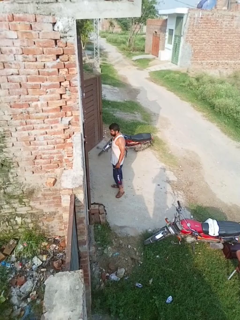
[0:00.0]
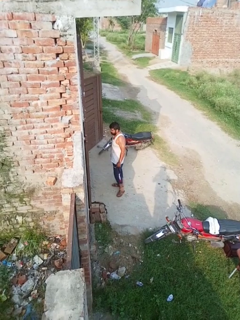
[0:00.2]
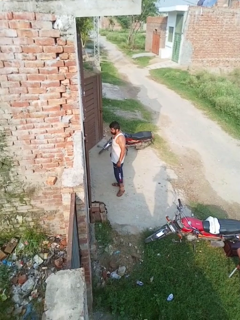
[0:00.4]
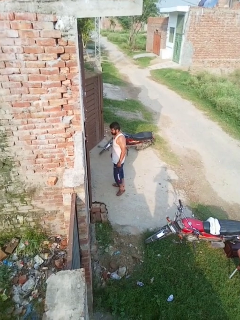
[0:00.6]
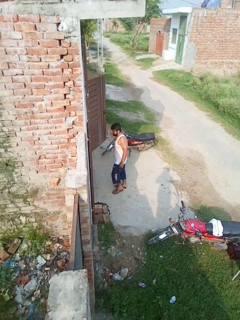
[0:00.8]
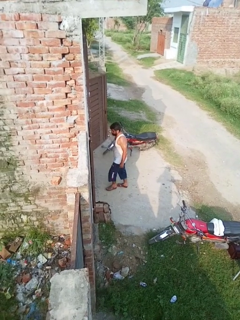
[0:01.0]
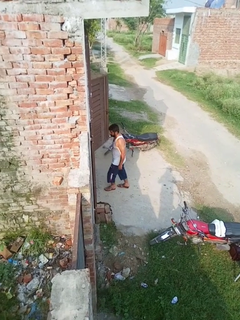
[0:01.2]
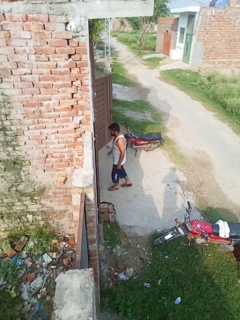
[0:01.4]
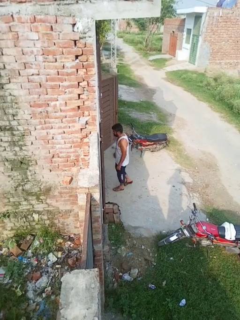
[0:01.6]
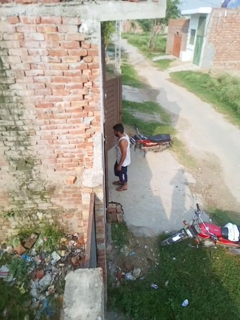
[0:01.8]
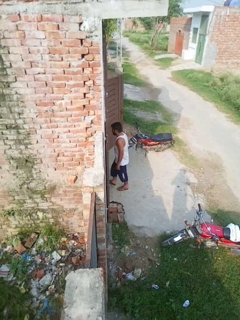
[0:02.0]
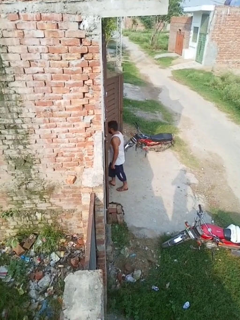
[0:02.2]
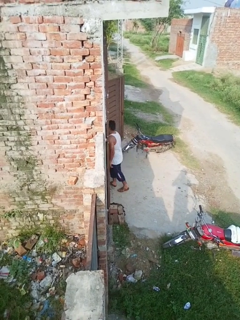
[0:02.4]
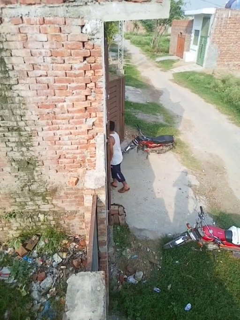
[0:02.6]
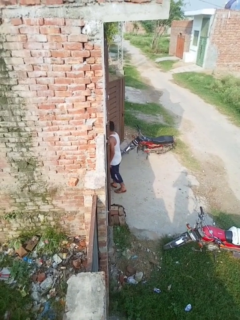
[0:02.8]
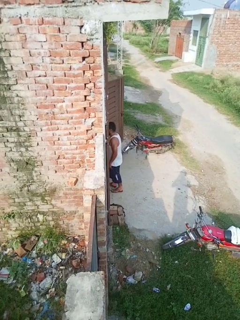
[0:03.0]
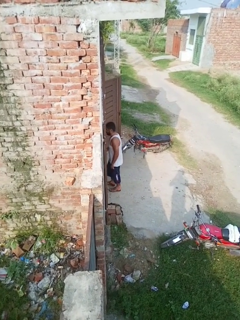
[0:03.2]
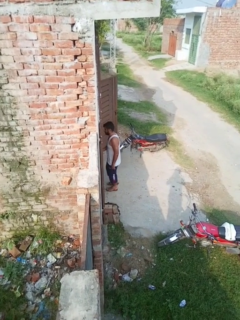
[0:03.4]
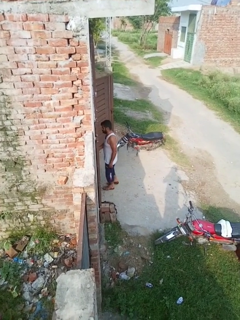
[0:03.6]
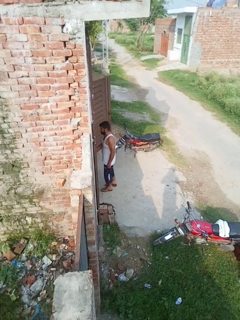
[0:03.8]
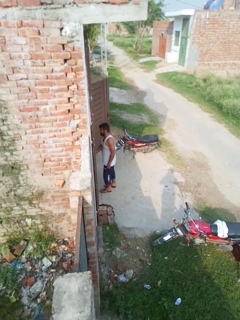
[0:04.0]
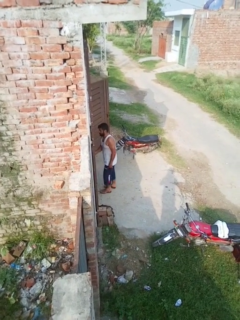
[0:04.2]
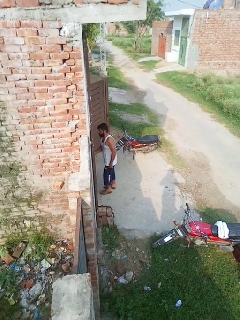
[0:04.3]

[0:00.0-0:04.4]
person bumps into wall

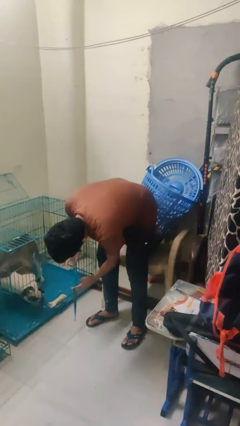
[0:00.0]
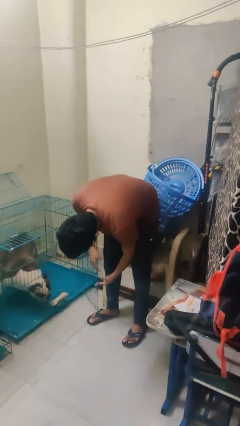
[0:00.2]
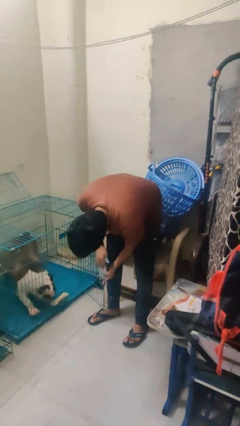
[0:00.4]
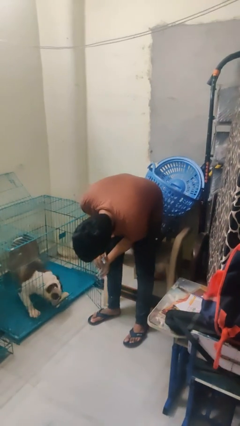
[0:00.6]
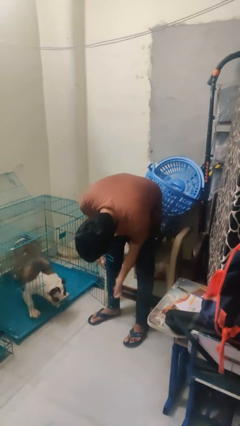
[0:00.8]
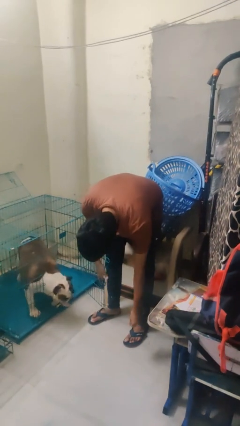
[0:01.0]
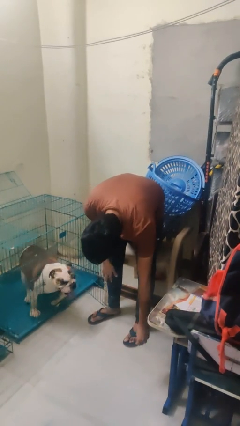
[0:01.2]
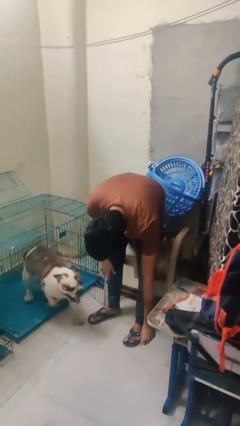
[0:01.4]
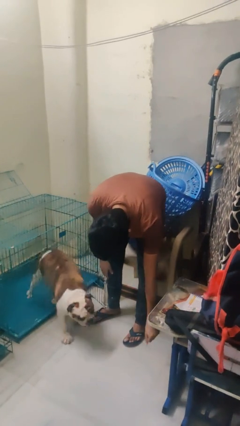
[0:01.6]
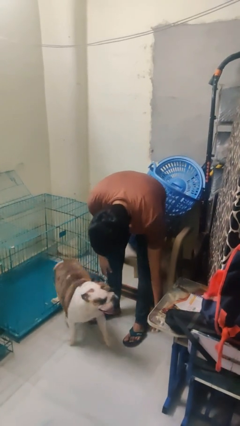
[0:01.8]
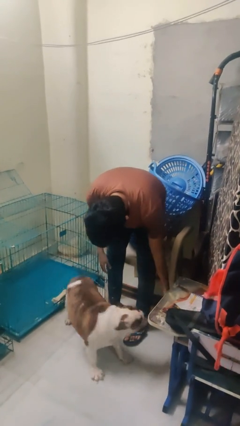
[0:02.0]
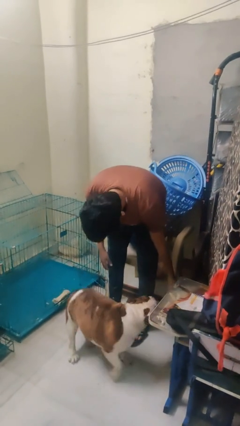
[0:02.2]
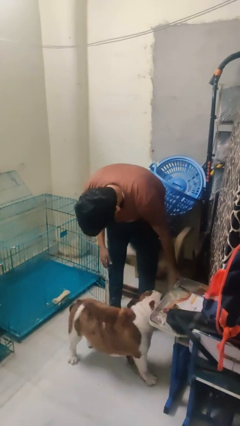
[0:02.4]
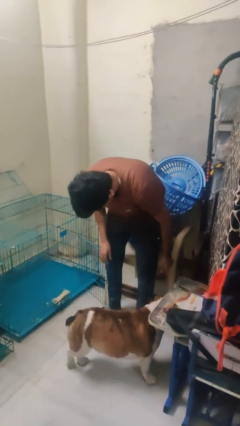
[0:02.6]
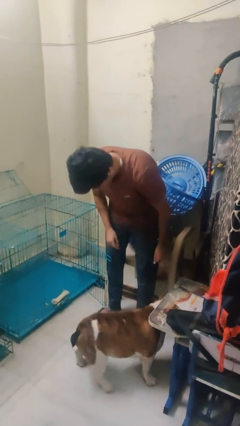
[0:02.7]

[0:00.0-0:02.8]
person uncrates dog

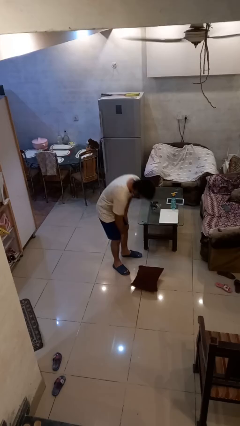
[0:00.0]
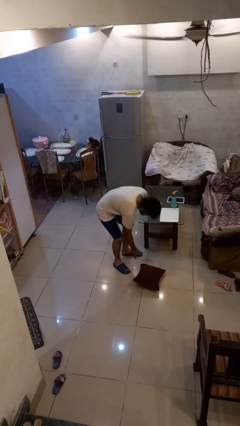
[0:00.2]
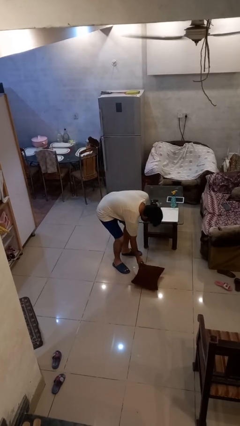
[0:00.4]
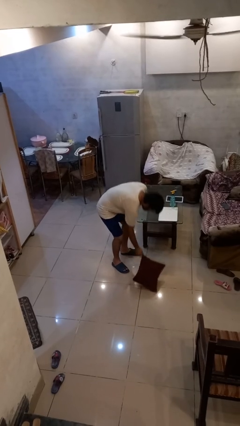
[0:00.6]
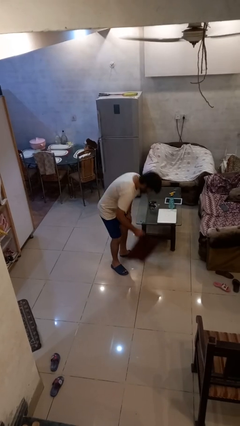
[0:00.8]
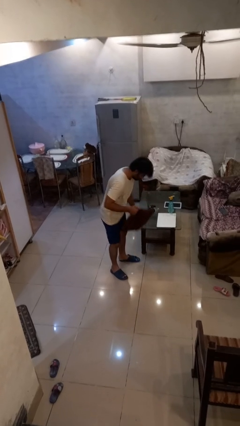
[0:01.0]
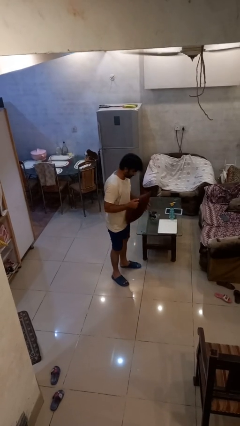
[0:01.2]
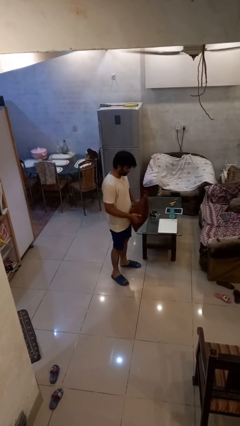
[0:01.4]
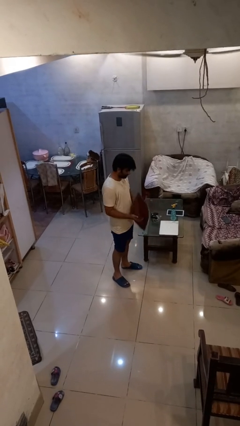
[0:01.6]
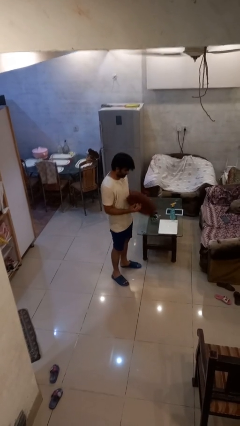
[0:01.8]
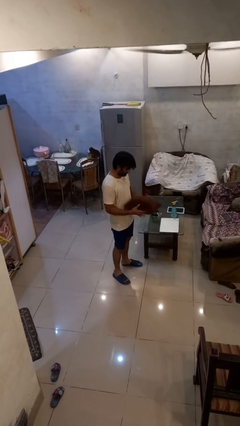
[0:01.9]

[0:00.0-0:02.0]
person picks up object from floor

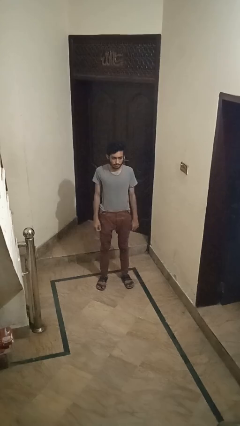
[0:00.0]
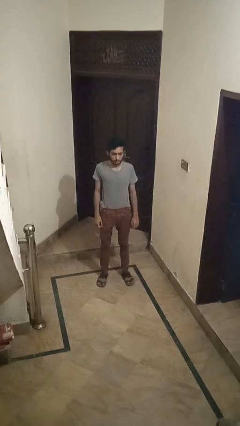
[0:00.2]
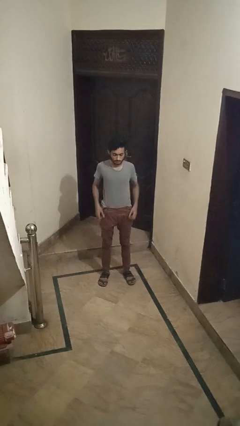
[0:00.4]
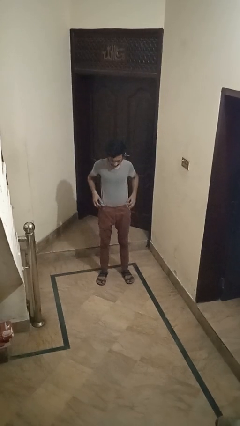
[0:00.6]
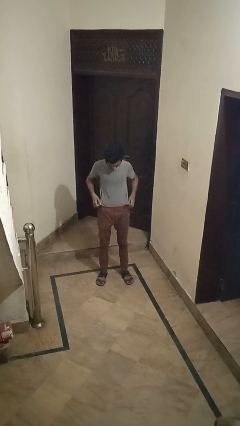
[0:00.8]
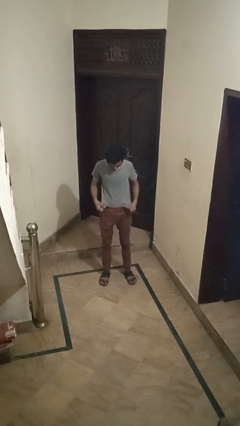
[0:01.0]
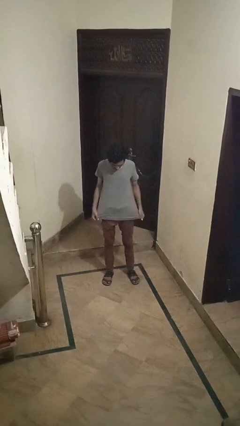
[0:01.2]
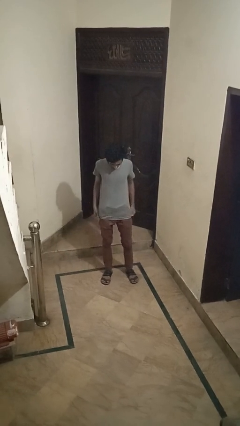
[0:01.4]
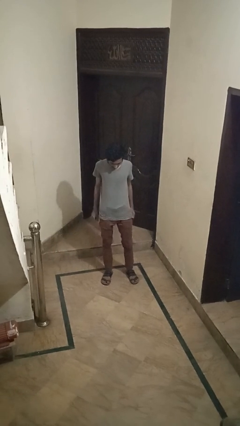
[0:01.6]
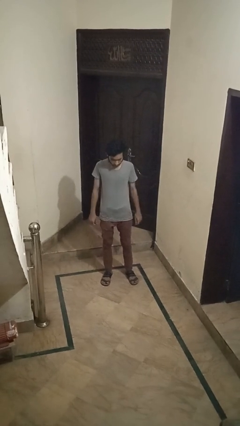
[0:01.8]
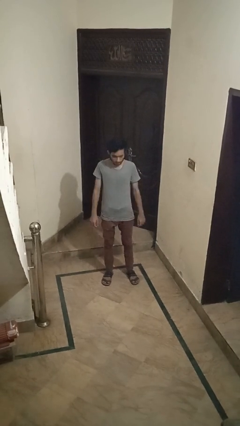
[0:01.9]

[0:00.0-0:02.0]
person untucks shirt

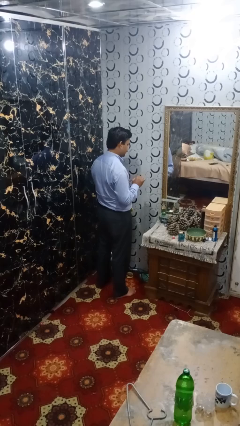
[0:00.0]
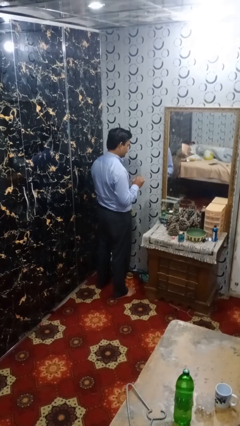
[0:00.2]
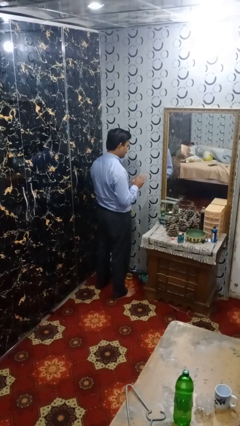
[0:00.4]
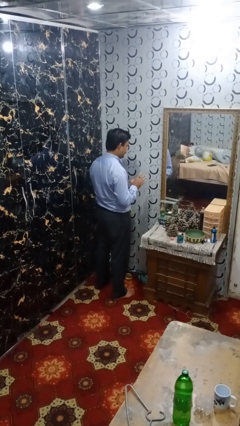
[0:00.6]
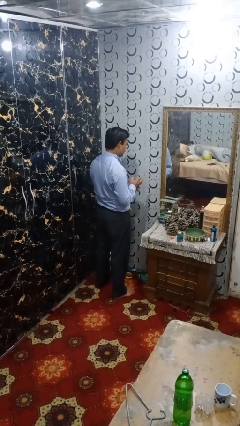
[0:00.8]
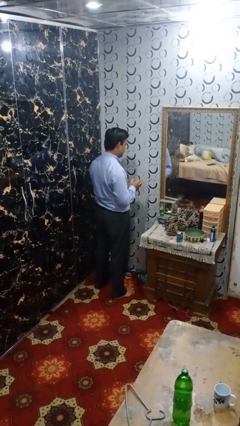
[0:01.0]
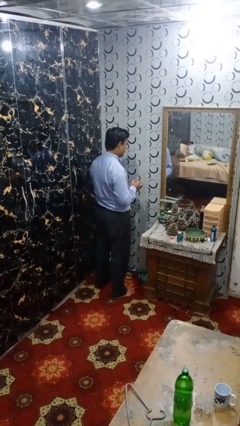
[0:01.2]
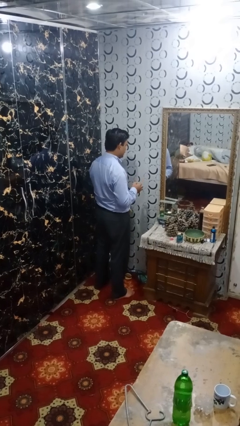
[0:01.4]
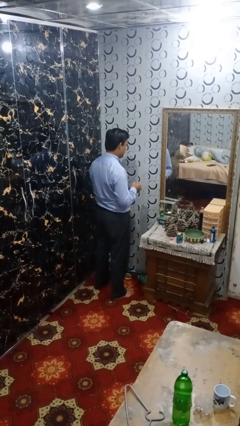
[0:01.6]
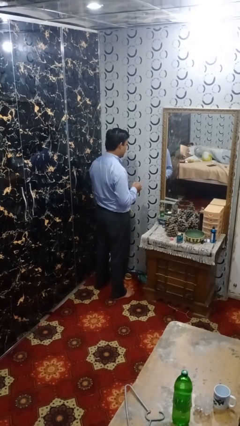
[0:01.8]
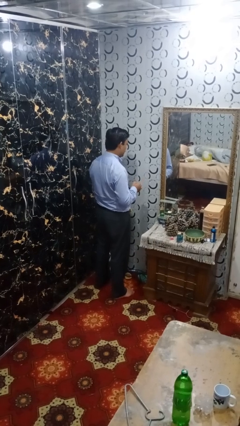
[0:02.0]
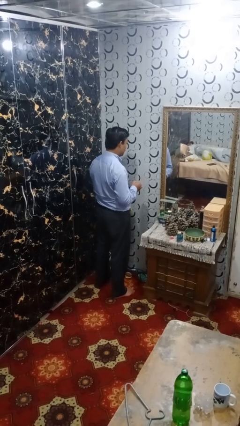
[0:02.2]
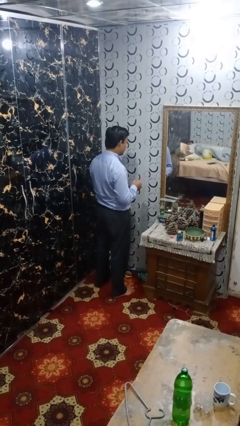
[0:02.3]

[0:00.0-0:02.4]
person takes off ring

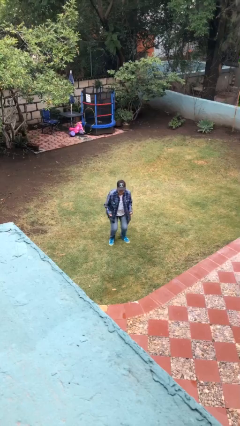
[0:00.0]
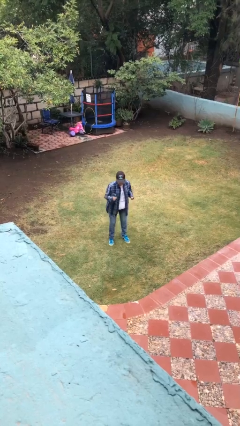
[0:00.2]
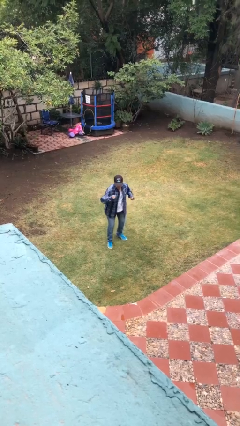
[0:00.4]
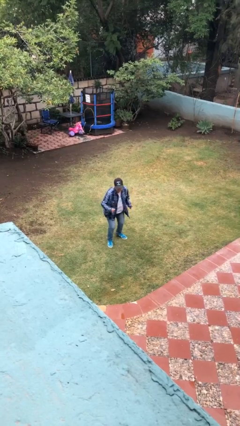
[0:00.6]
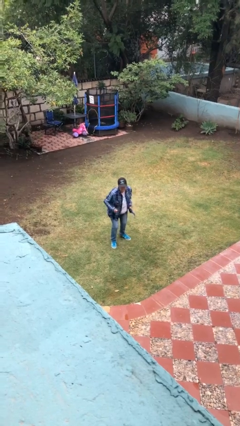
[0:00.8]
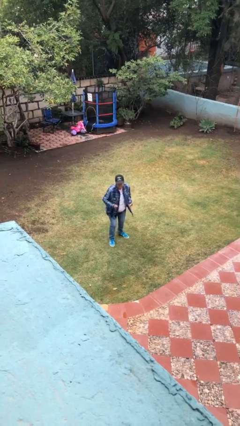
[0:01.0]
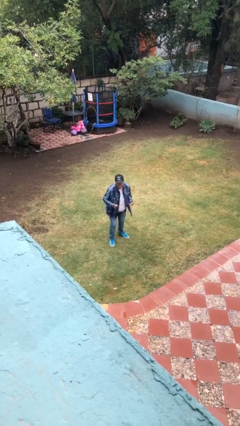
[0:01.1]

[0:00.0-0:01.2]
person jumps

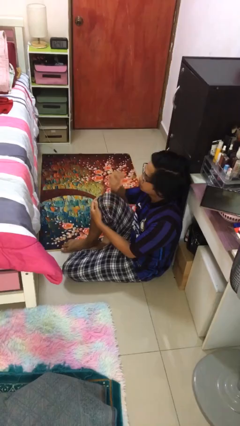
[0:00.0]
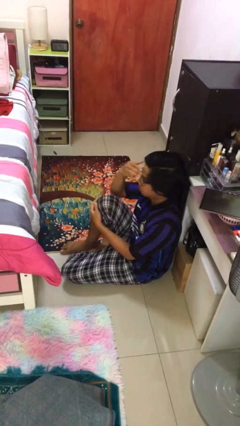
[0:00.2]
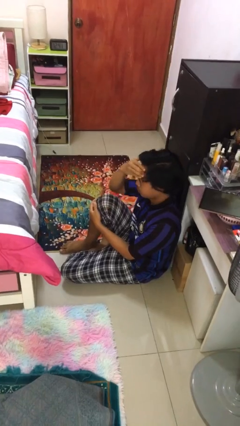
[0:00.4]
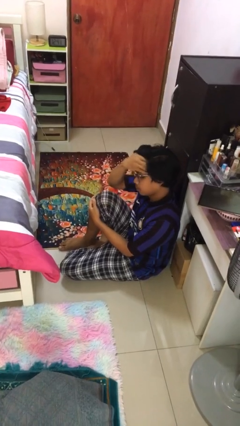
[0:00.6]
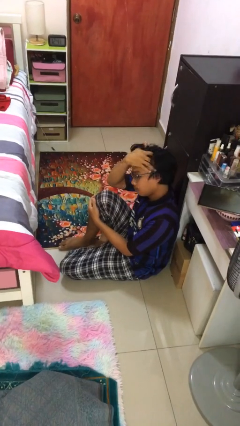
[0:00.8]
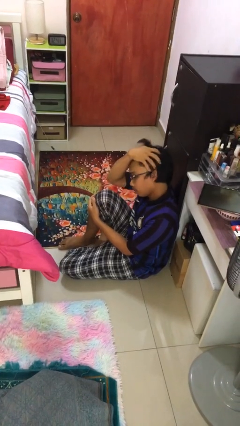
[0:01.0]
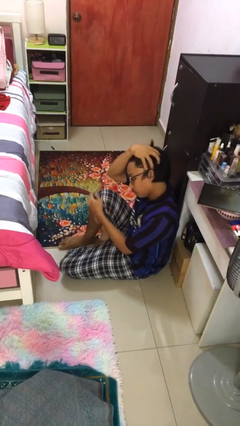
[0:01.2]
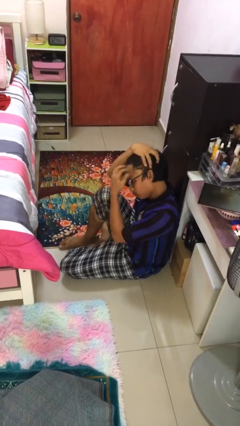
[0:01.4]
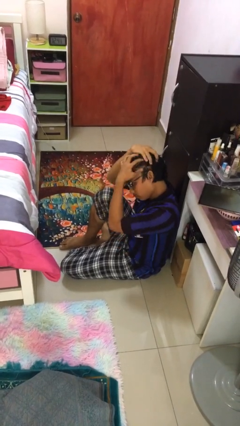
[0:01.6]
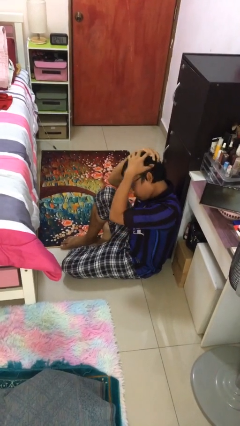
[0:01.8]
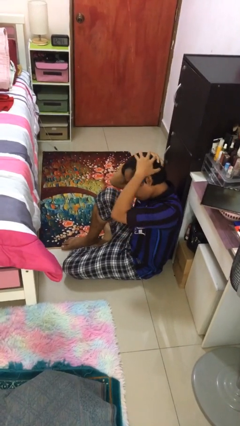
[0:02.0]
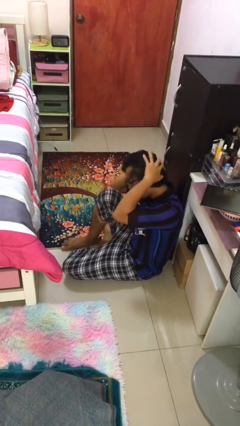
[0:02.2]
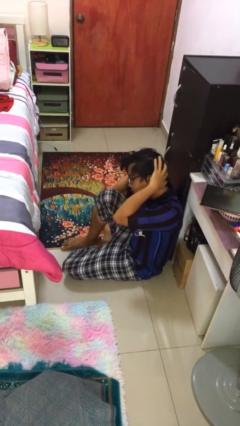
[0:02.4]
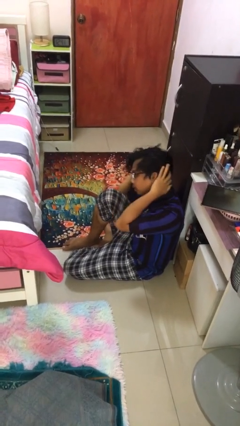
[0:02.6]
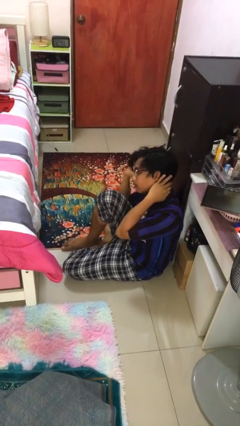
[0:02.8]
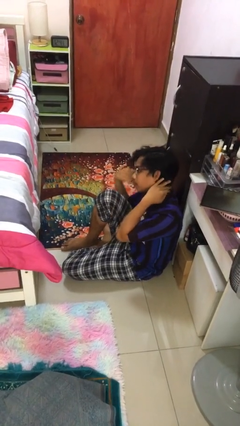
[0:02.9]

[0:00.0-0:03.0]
person strokes hair
